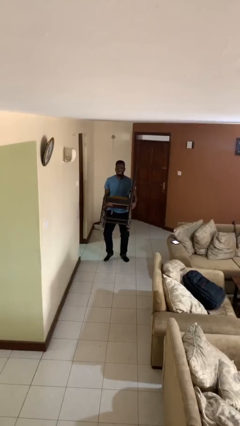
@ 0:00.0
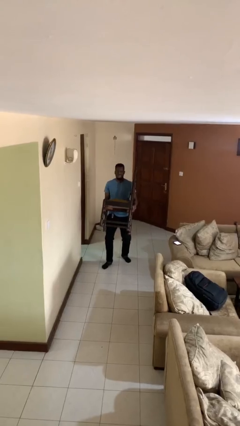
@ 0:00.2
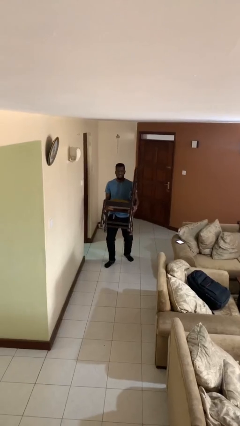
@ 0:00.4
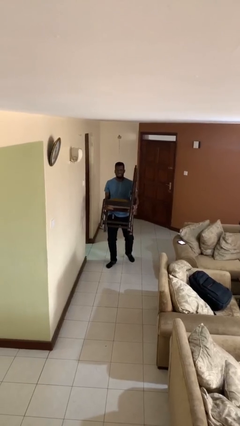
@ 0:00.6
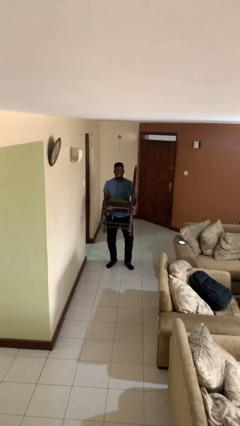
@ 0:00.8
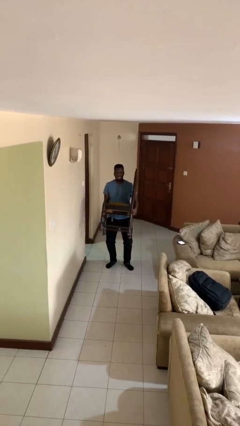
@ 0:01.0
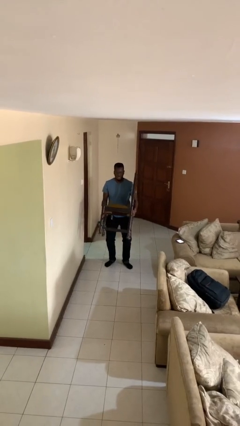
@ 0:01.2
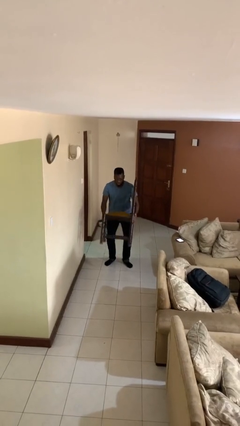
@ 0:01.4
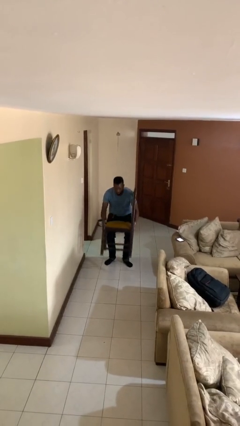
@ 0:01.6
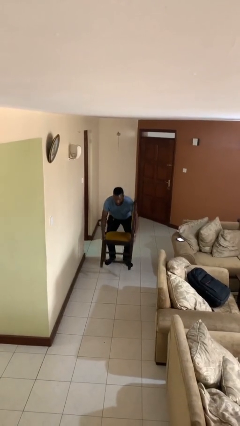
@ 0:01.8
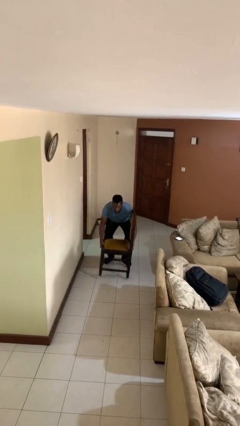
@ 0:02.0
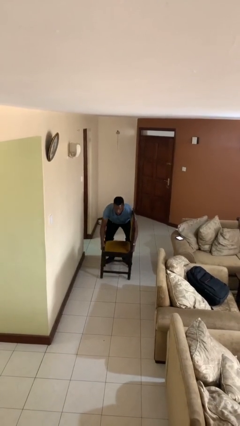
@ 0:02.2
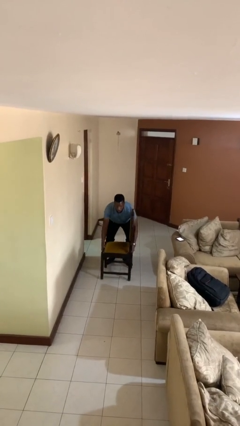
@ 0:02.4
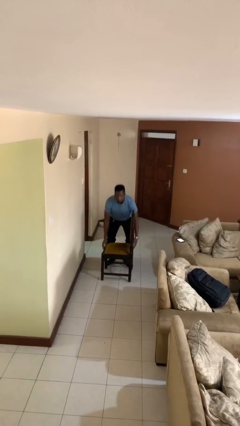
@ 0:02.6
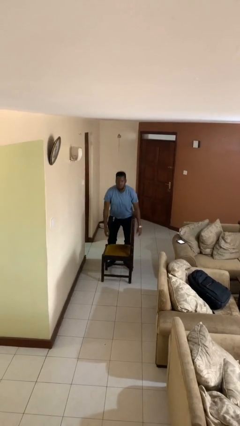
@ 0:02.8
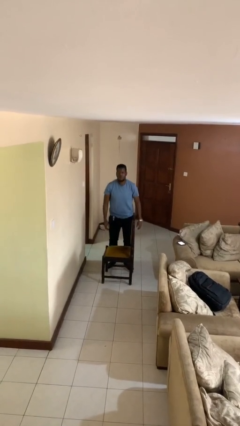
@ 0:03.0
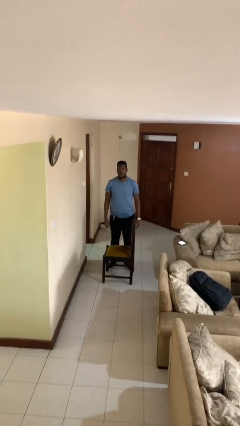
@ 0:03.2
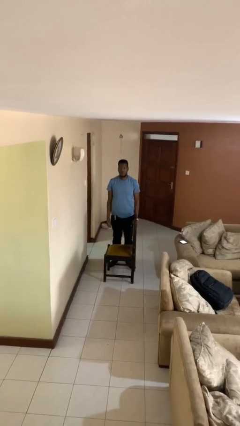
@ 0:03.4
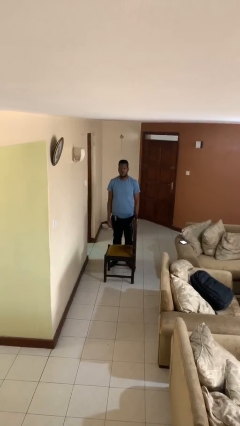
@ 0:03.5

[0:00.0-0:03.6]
person puts down object on floor

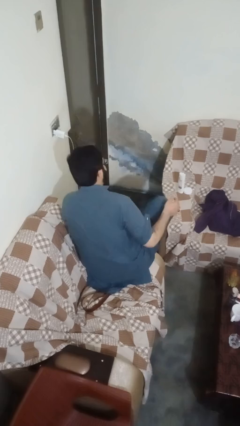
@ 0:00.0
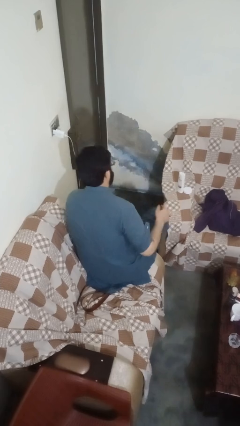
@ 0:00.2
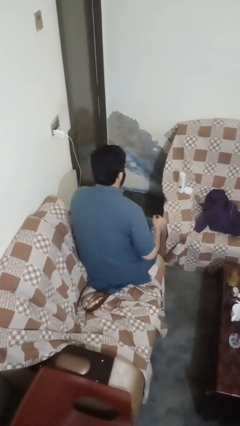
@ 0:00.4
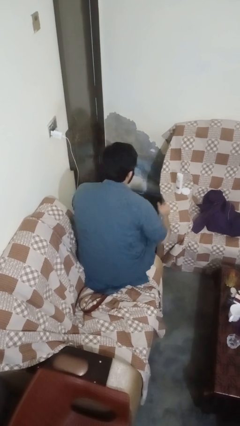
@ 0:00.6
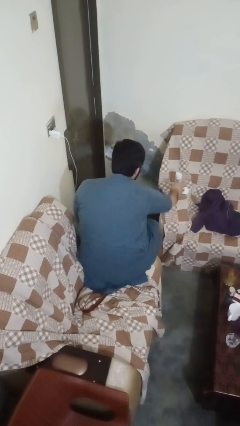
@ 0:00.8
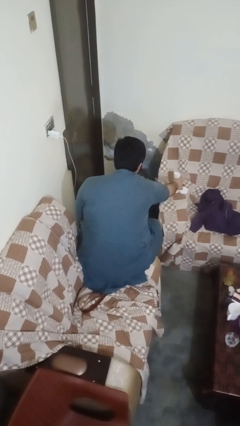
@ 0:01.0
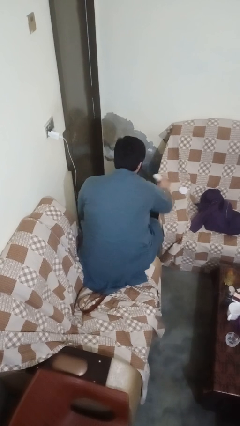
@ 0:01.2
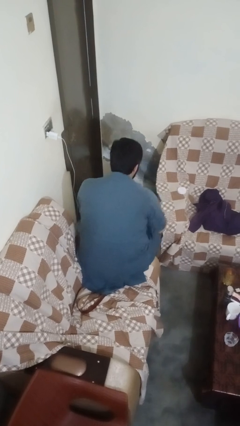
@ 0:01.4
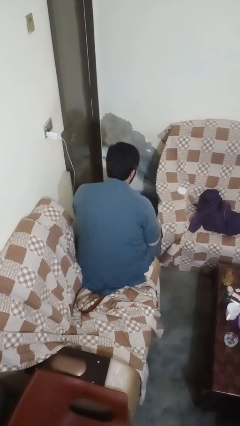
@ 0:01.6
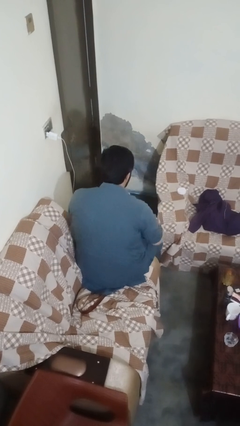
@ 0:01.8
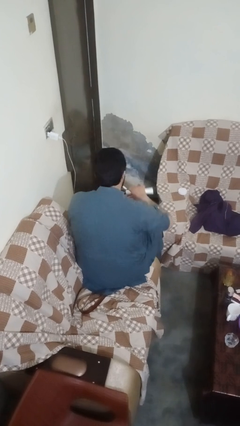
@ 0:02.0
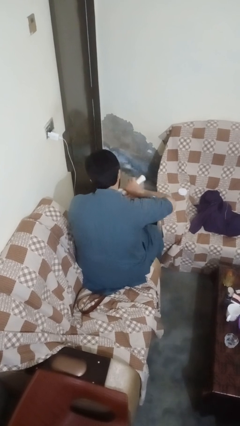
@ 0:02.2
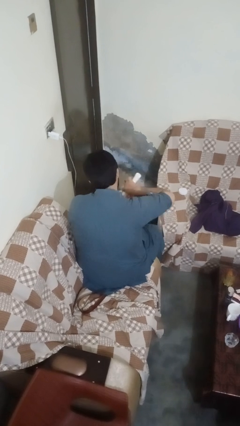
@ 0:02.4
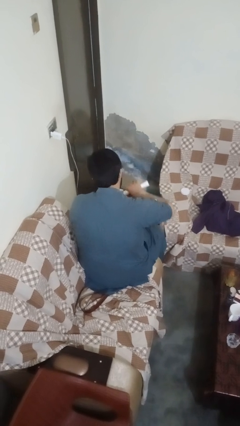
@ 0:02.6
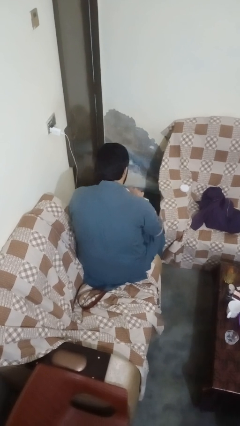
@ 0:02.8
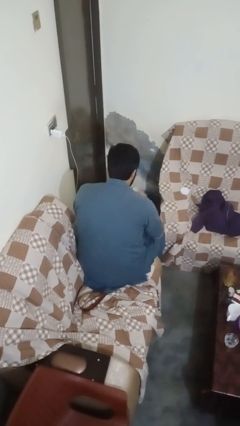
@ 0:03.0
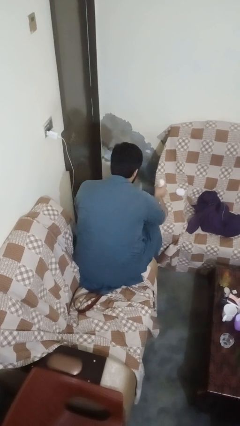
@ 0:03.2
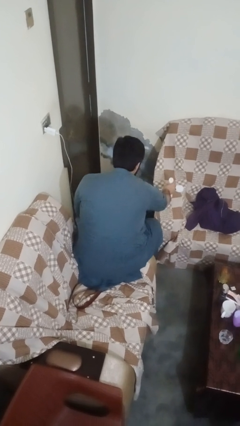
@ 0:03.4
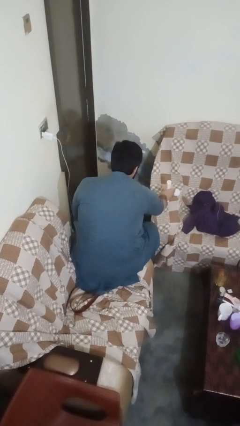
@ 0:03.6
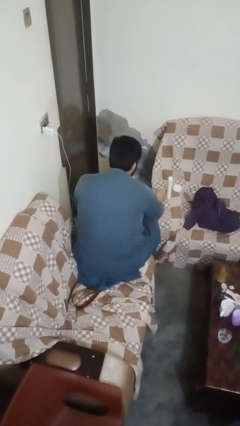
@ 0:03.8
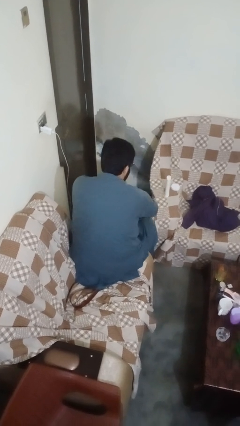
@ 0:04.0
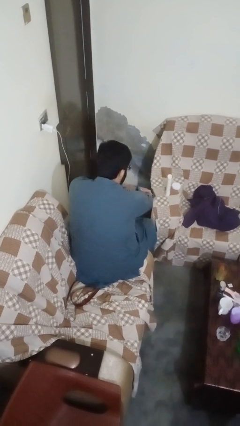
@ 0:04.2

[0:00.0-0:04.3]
person applies sunscreen

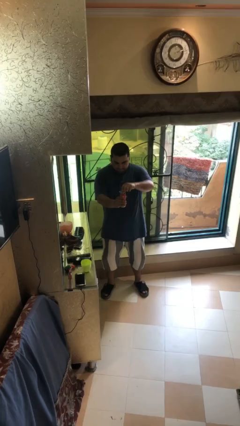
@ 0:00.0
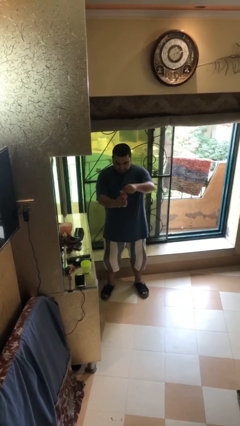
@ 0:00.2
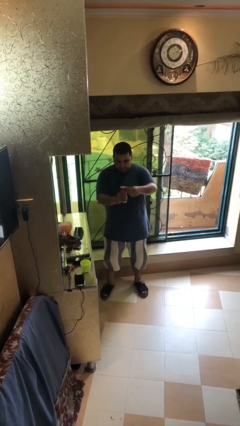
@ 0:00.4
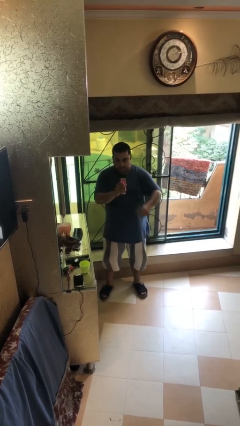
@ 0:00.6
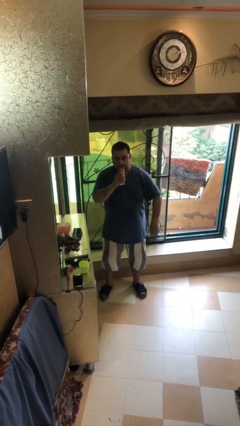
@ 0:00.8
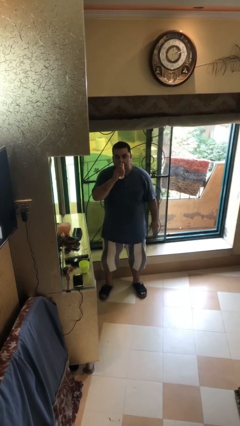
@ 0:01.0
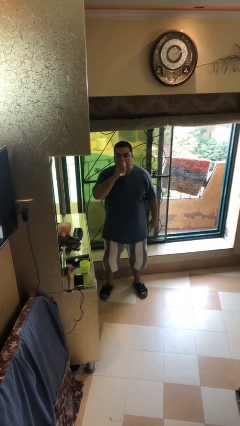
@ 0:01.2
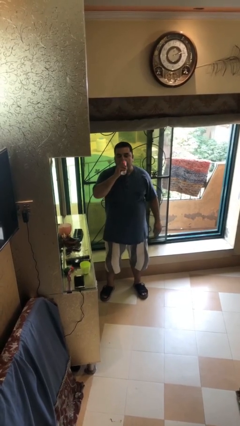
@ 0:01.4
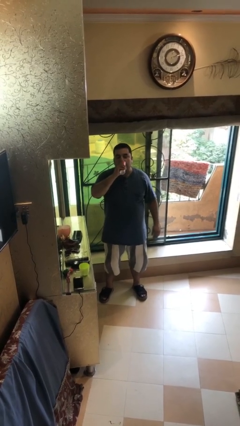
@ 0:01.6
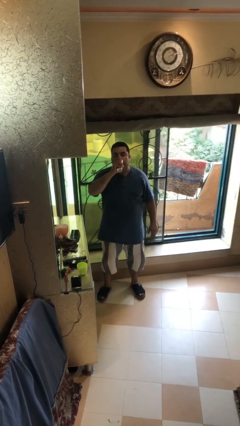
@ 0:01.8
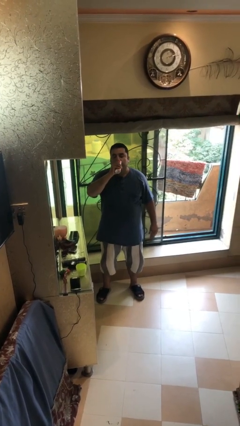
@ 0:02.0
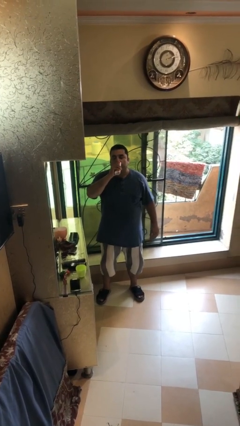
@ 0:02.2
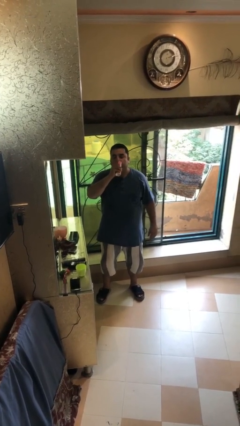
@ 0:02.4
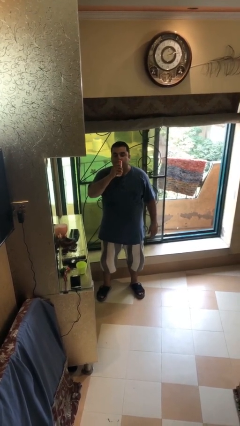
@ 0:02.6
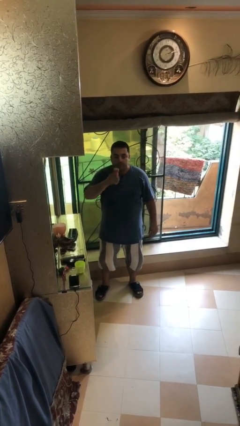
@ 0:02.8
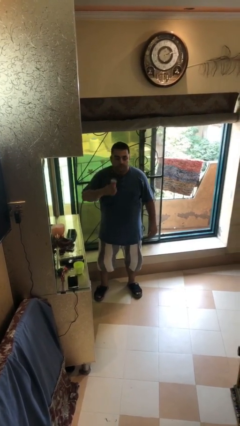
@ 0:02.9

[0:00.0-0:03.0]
person drinks from beverage can

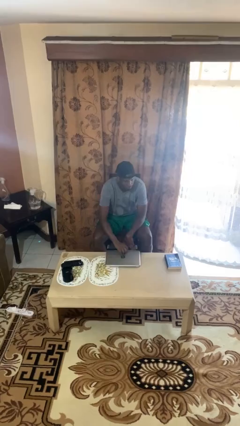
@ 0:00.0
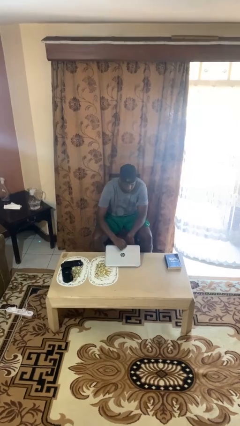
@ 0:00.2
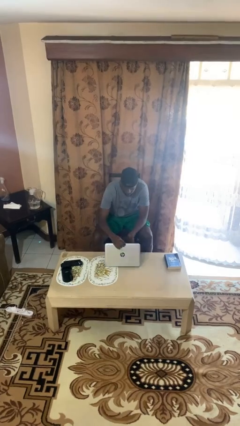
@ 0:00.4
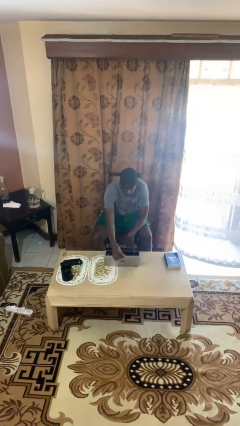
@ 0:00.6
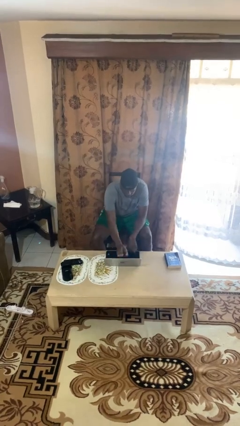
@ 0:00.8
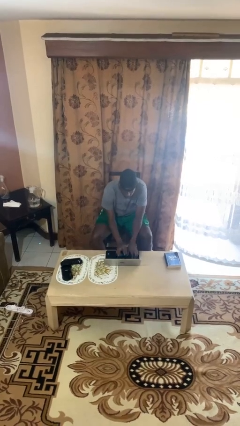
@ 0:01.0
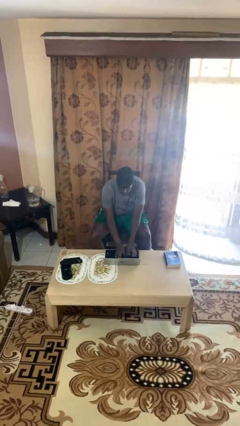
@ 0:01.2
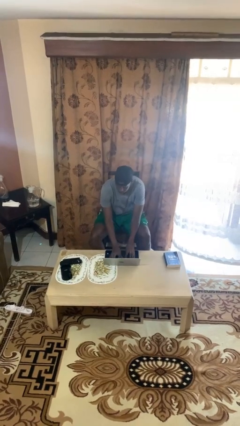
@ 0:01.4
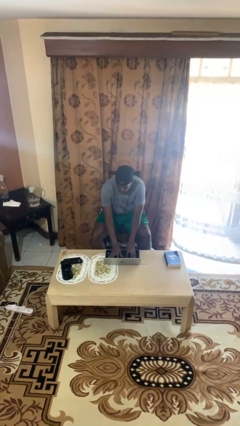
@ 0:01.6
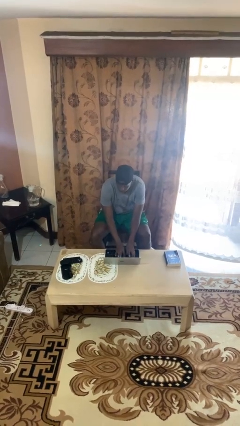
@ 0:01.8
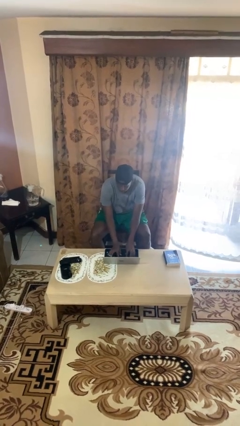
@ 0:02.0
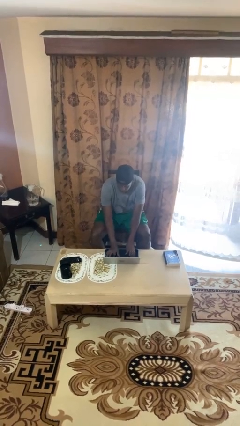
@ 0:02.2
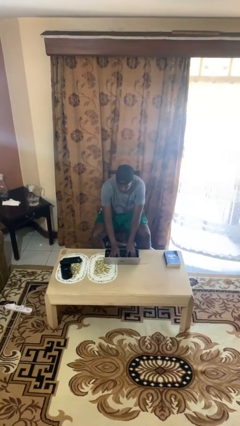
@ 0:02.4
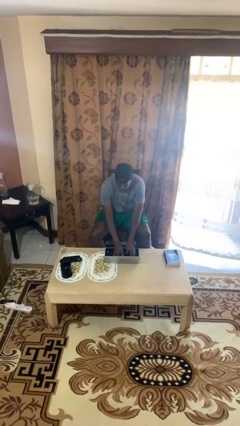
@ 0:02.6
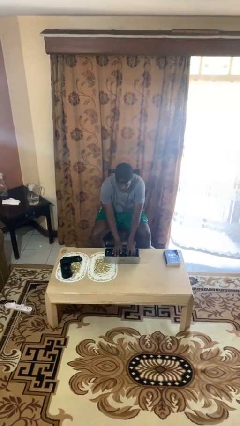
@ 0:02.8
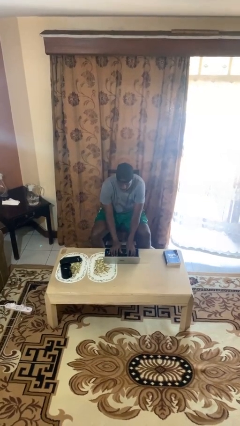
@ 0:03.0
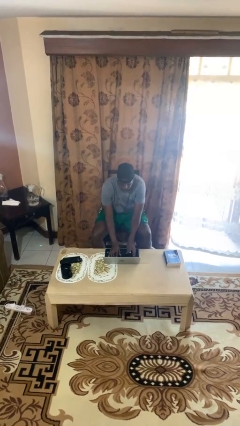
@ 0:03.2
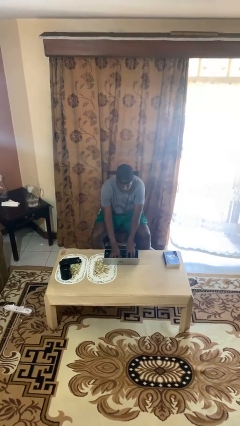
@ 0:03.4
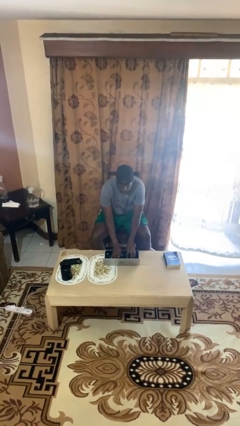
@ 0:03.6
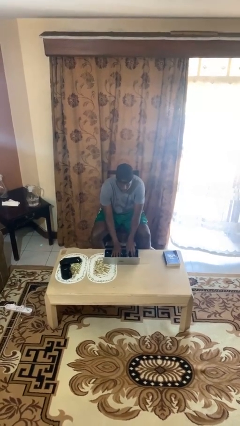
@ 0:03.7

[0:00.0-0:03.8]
person interacts with laptop

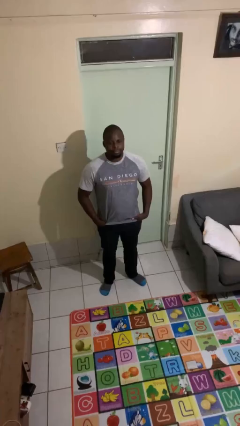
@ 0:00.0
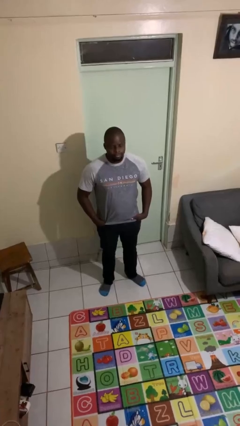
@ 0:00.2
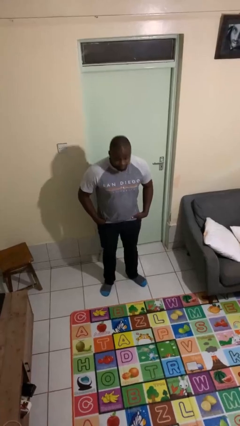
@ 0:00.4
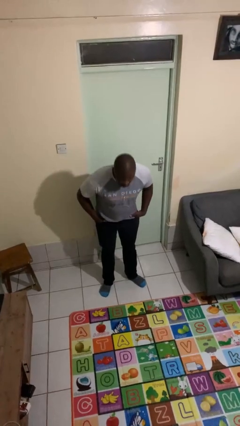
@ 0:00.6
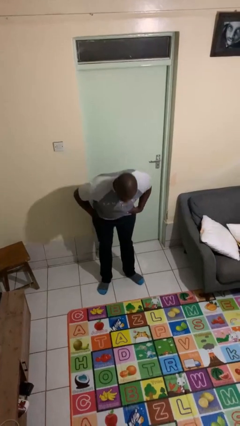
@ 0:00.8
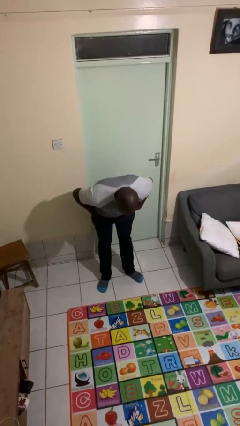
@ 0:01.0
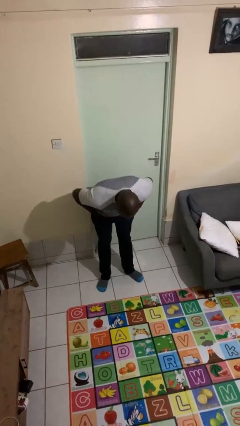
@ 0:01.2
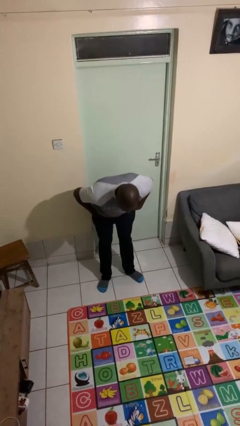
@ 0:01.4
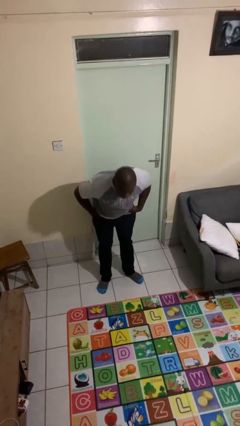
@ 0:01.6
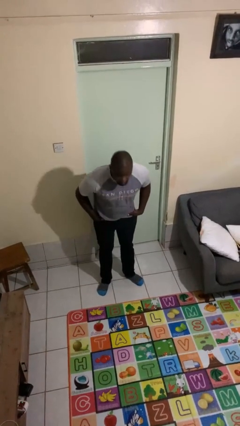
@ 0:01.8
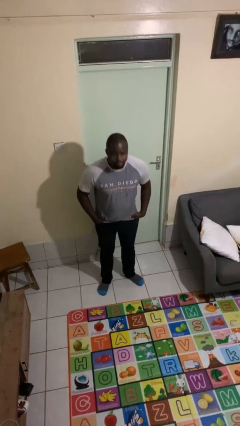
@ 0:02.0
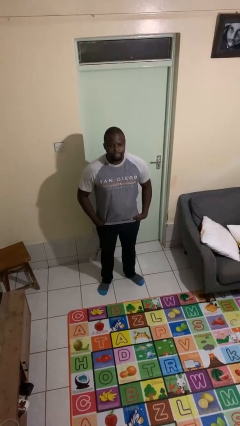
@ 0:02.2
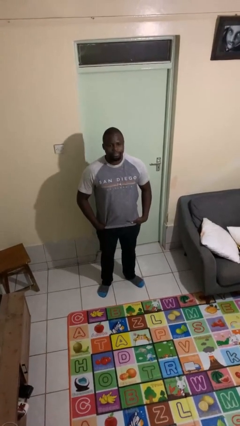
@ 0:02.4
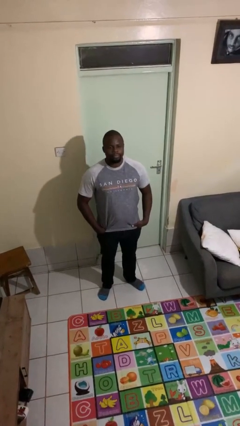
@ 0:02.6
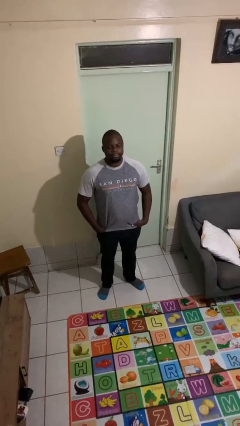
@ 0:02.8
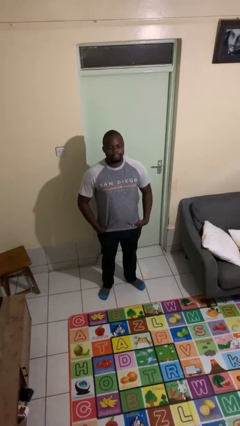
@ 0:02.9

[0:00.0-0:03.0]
person bows
